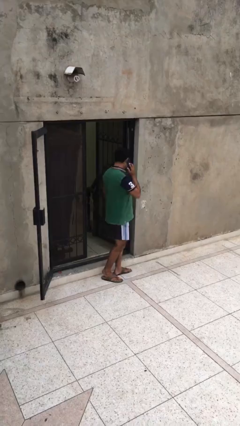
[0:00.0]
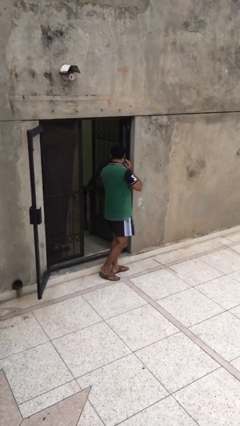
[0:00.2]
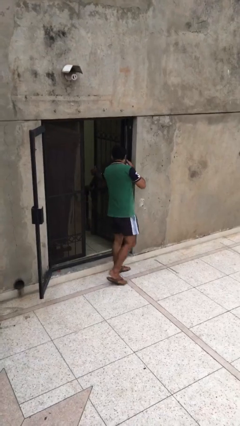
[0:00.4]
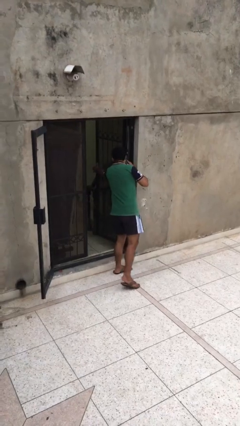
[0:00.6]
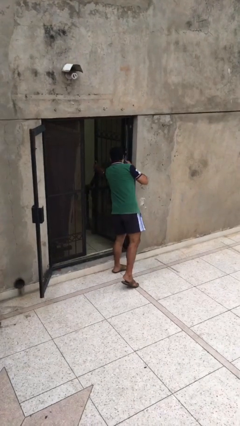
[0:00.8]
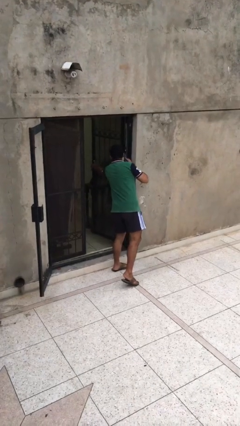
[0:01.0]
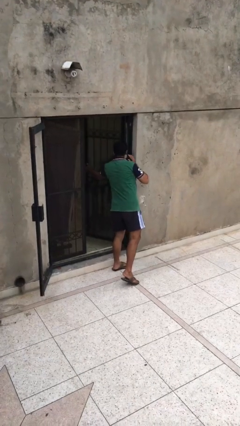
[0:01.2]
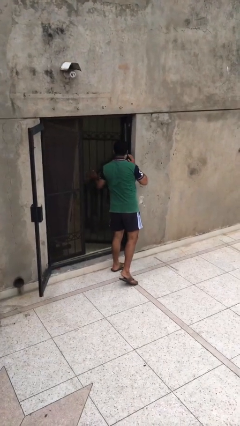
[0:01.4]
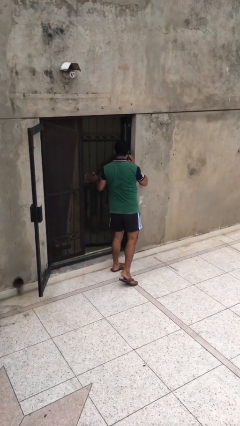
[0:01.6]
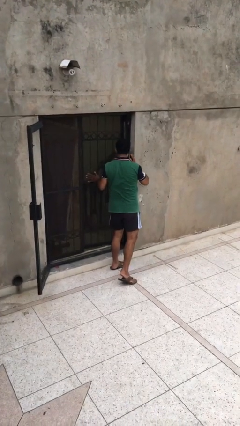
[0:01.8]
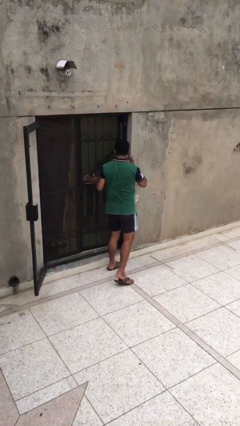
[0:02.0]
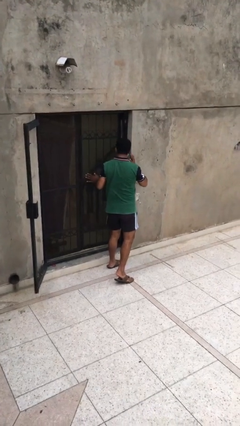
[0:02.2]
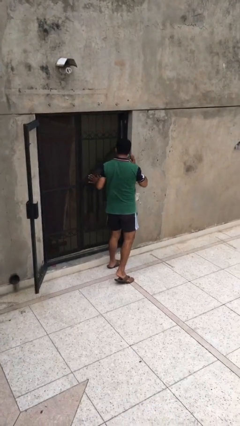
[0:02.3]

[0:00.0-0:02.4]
person closes facility door

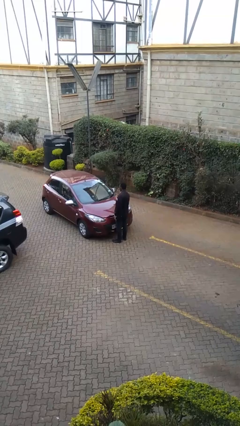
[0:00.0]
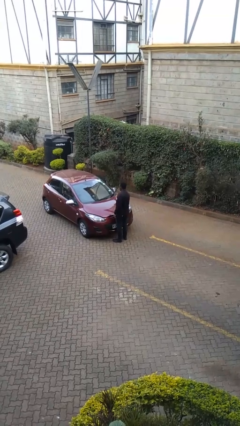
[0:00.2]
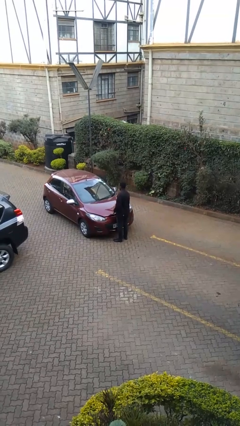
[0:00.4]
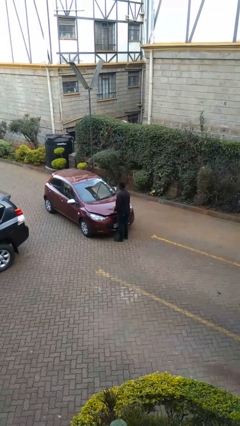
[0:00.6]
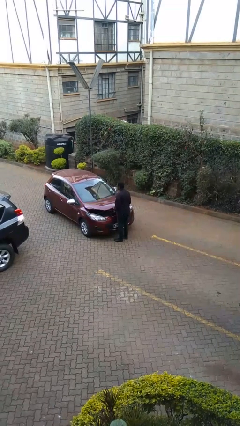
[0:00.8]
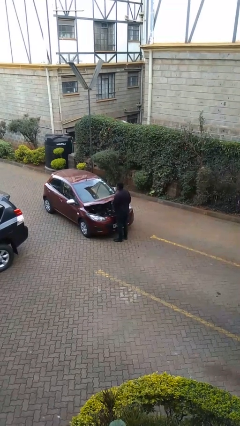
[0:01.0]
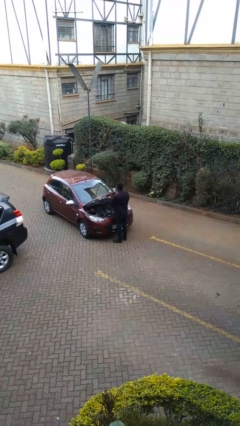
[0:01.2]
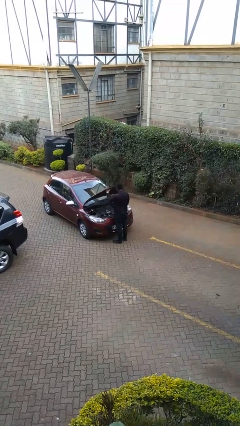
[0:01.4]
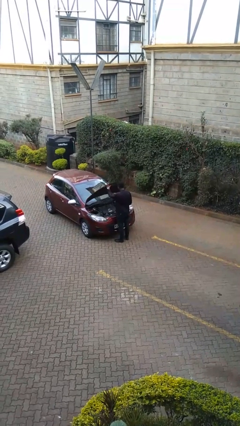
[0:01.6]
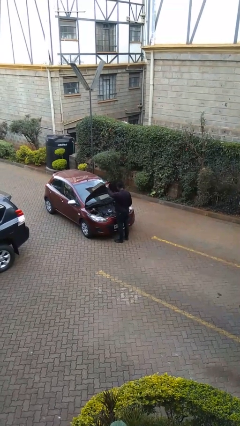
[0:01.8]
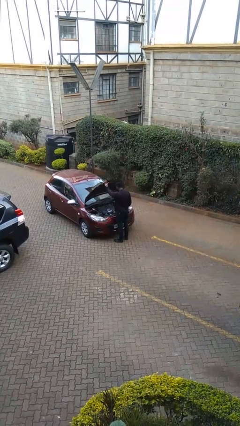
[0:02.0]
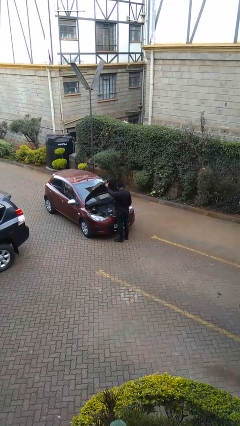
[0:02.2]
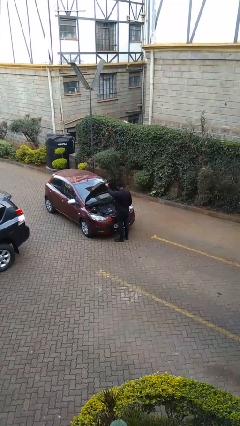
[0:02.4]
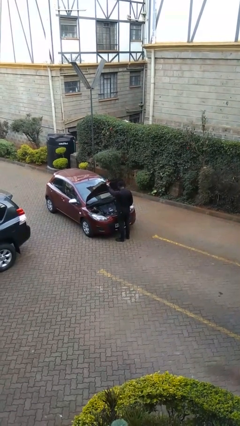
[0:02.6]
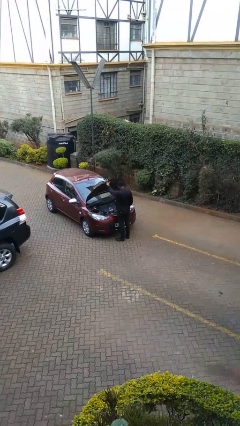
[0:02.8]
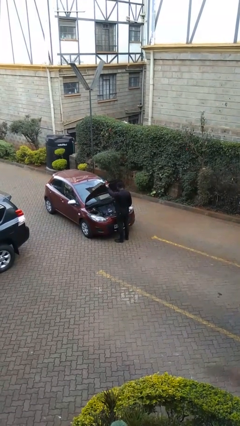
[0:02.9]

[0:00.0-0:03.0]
person opens car hood

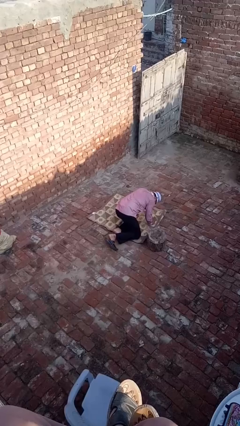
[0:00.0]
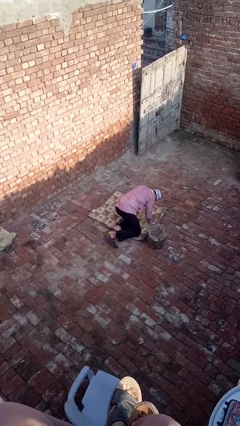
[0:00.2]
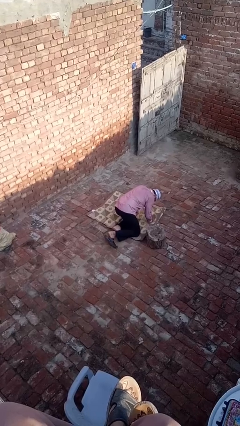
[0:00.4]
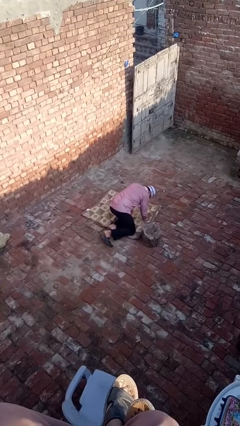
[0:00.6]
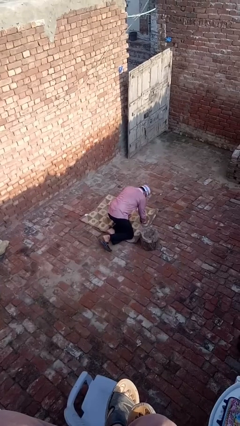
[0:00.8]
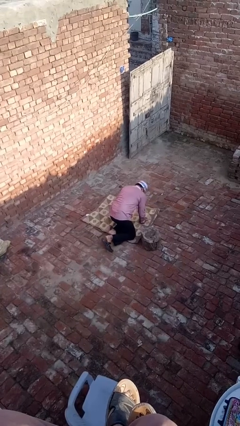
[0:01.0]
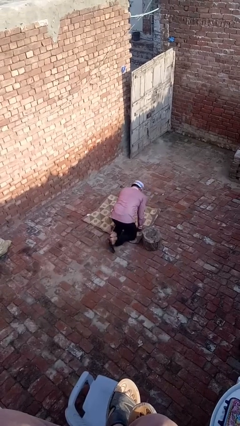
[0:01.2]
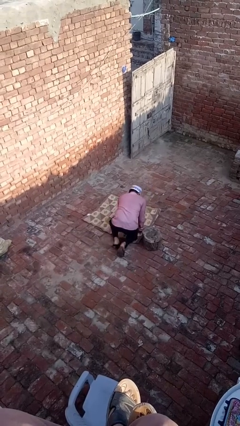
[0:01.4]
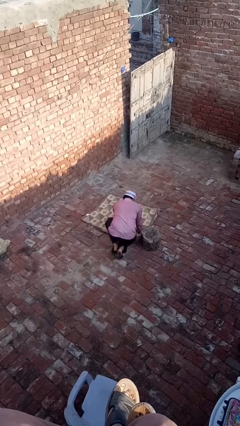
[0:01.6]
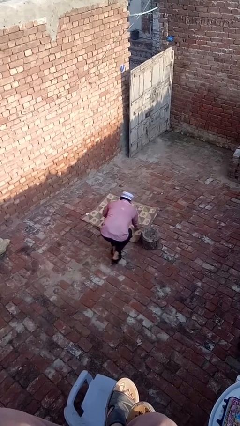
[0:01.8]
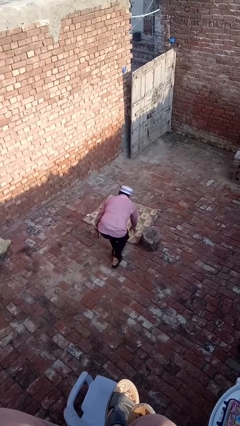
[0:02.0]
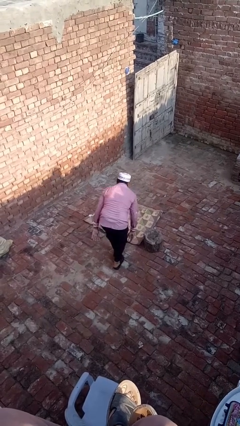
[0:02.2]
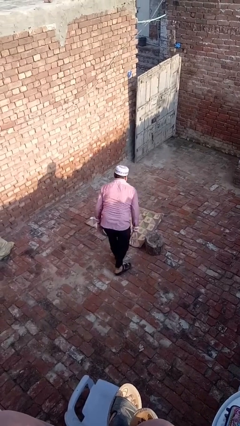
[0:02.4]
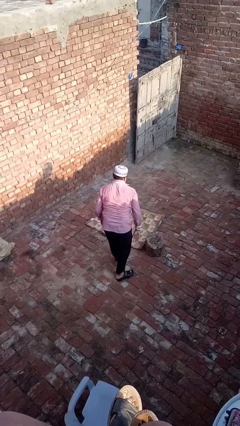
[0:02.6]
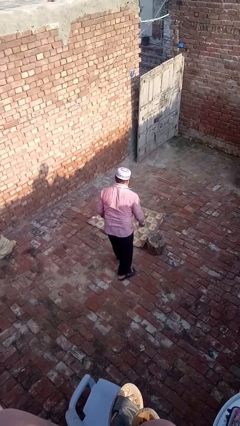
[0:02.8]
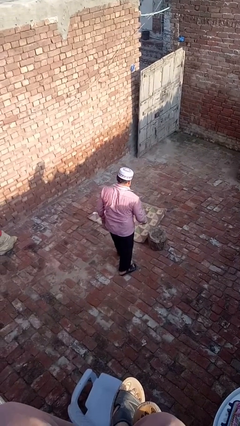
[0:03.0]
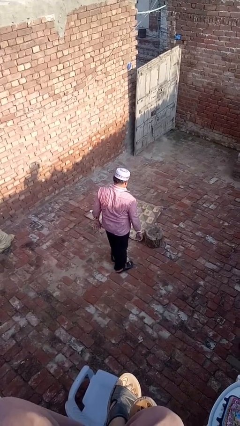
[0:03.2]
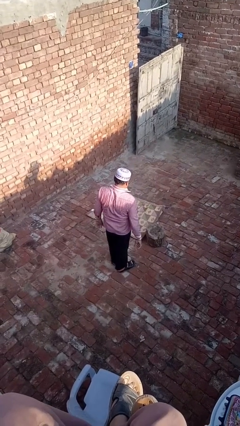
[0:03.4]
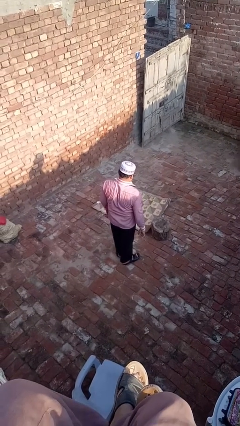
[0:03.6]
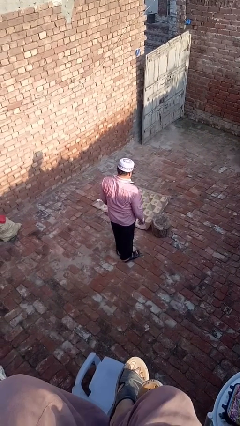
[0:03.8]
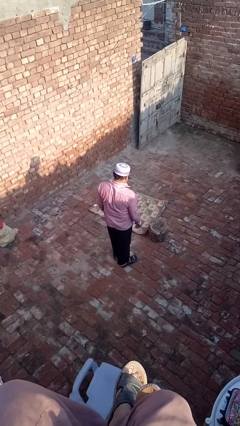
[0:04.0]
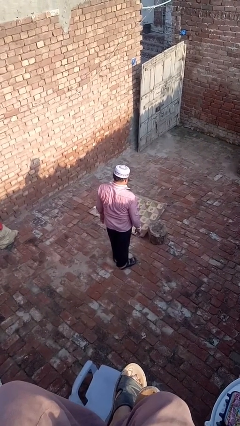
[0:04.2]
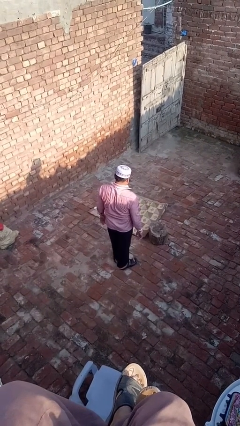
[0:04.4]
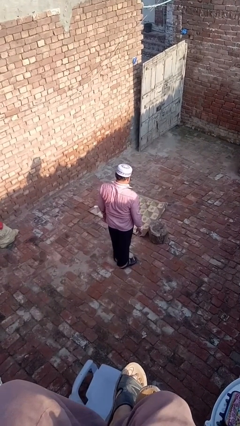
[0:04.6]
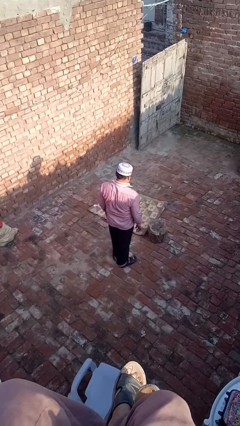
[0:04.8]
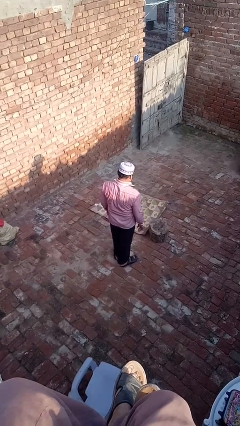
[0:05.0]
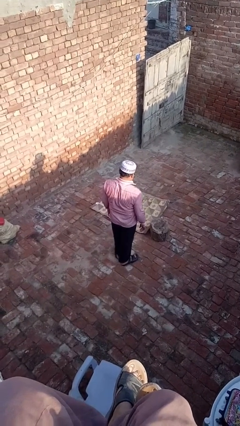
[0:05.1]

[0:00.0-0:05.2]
person stands up from floor

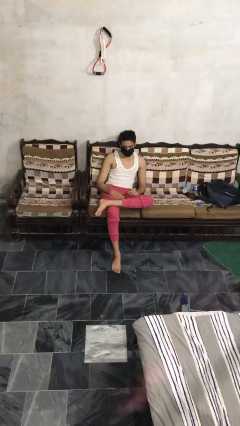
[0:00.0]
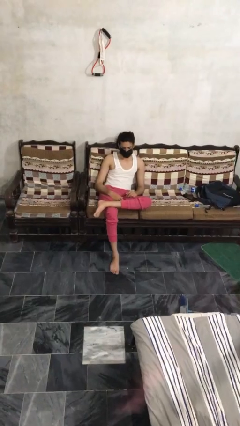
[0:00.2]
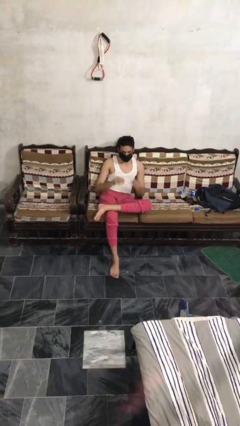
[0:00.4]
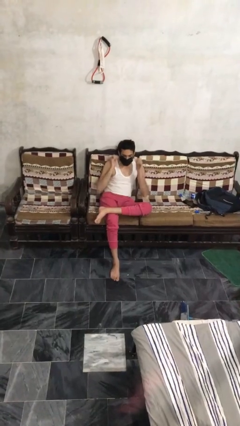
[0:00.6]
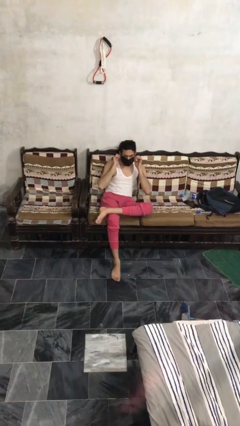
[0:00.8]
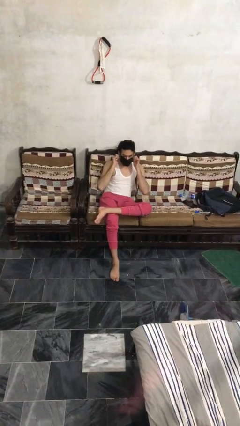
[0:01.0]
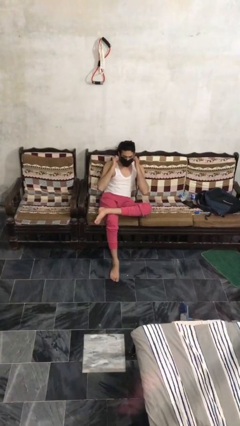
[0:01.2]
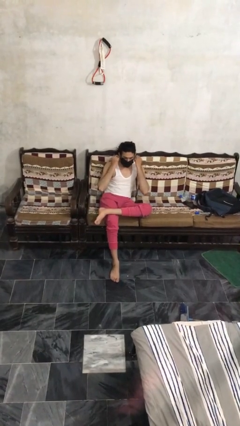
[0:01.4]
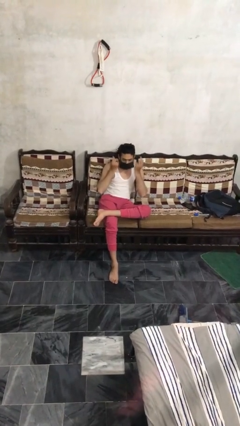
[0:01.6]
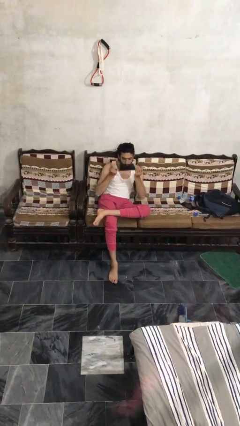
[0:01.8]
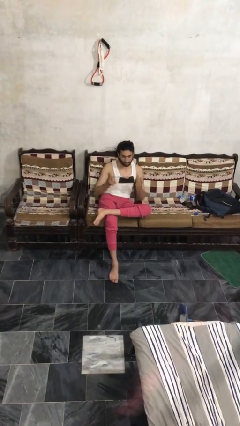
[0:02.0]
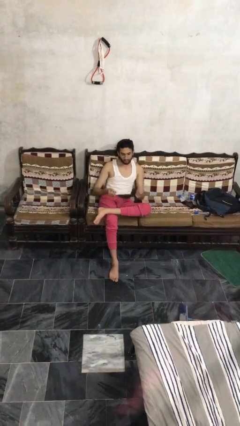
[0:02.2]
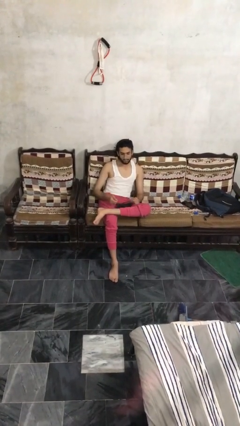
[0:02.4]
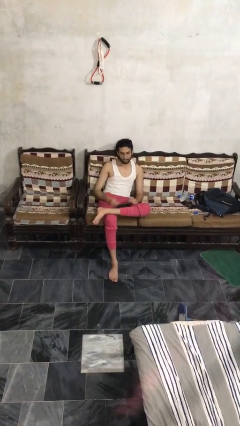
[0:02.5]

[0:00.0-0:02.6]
person takes off facemask

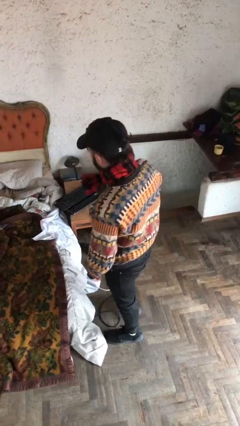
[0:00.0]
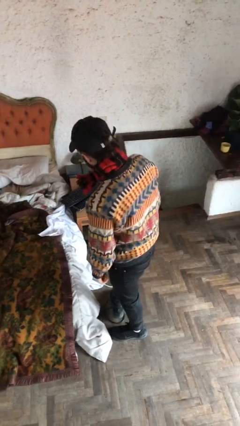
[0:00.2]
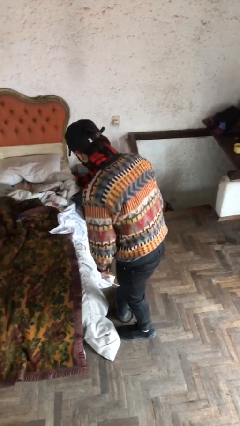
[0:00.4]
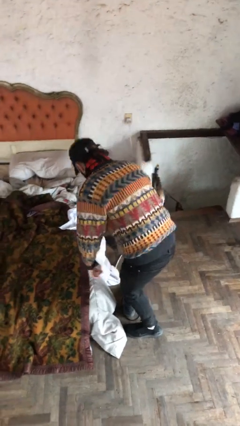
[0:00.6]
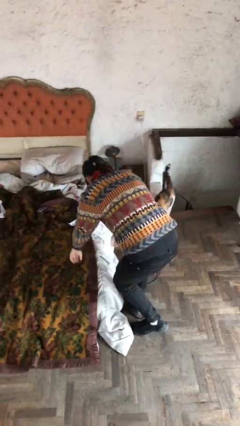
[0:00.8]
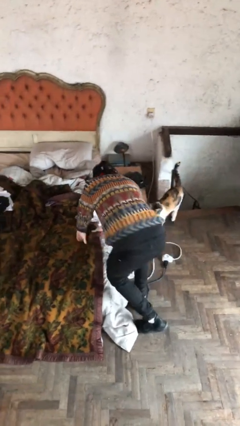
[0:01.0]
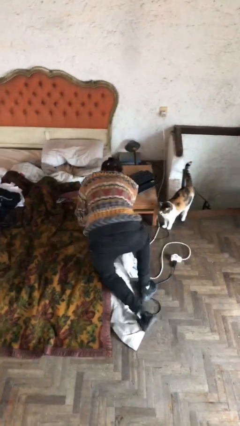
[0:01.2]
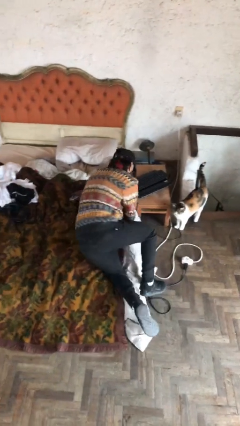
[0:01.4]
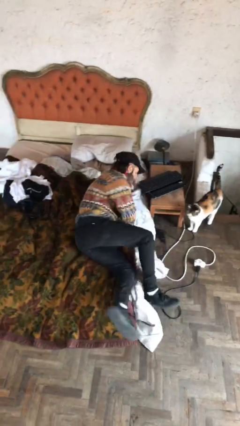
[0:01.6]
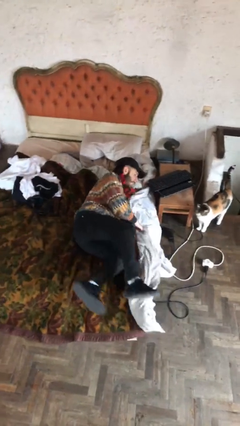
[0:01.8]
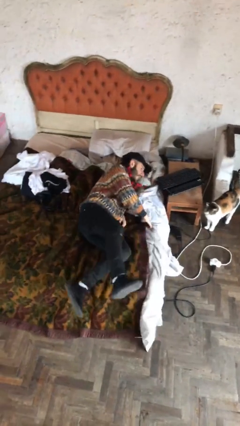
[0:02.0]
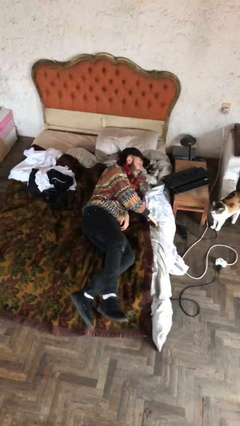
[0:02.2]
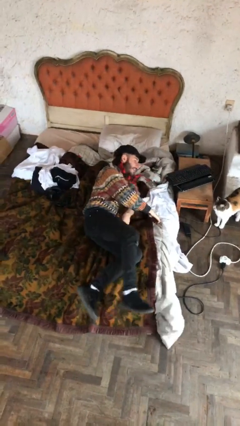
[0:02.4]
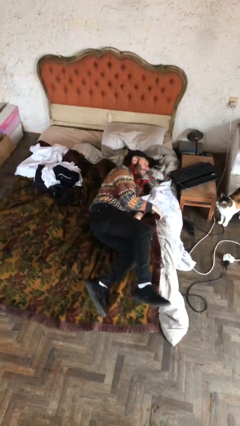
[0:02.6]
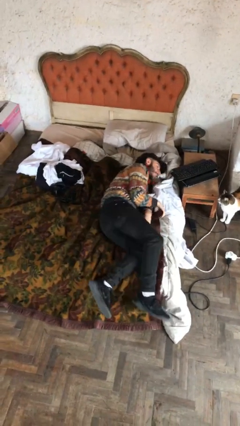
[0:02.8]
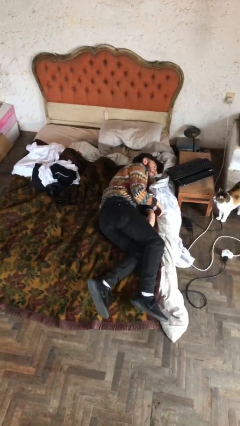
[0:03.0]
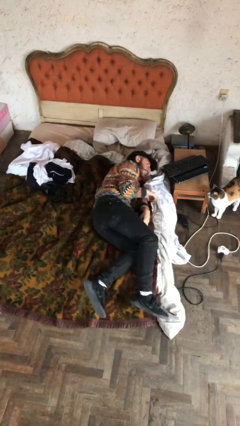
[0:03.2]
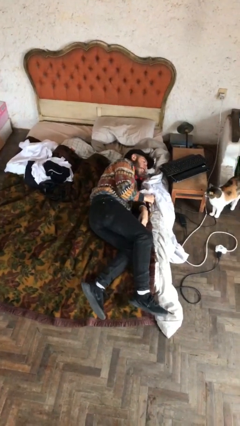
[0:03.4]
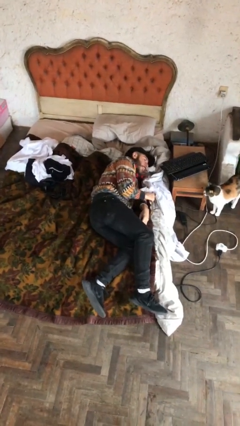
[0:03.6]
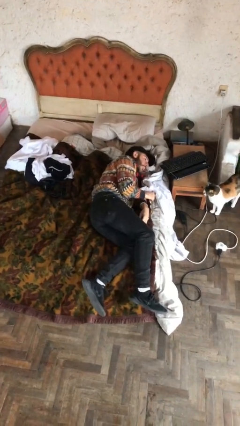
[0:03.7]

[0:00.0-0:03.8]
person lies down on bed

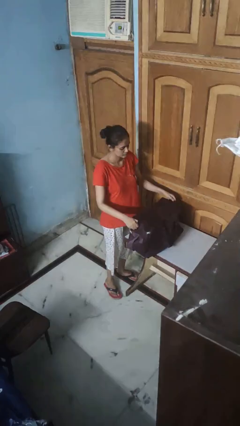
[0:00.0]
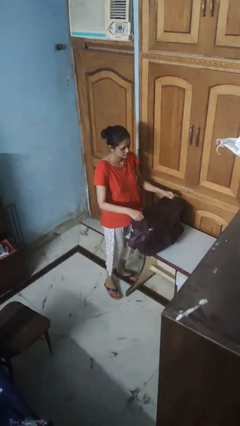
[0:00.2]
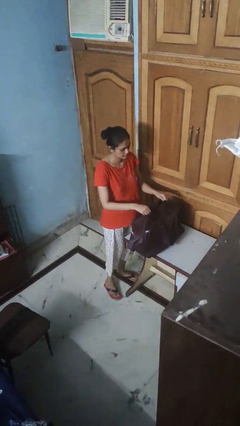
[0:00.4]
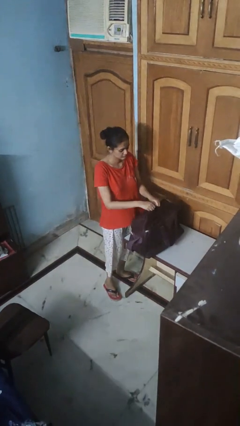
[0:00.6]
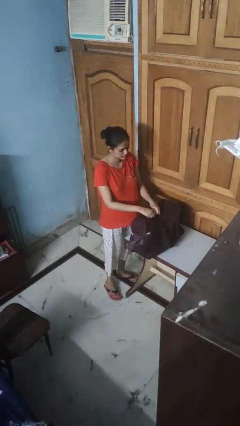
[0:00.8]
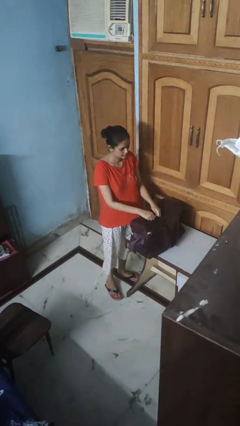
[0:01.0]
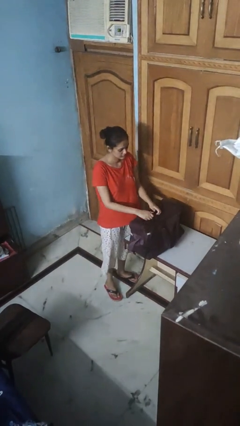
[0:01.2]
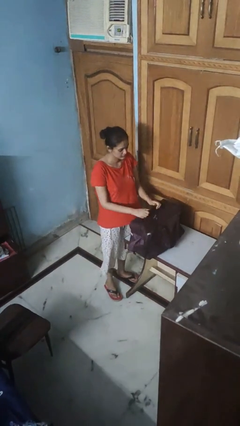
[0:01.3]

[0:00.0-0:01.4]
person closes suitcase
